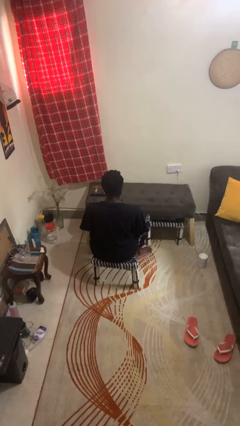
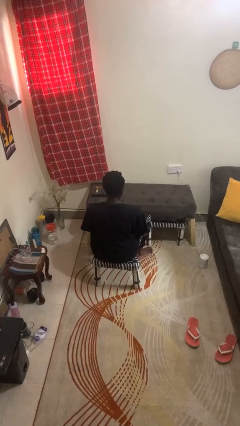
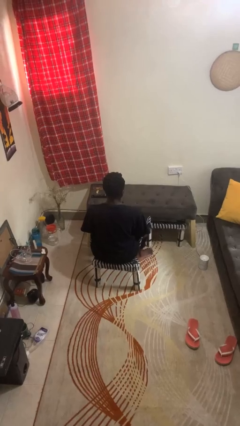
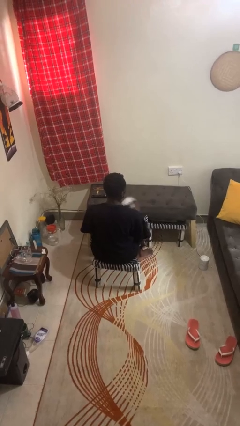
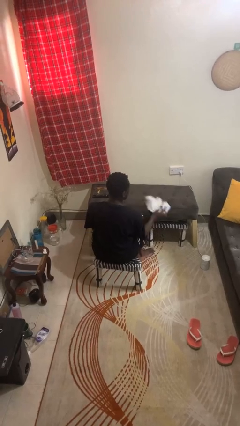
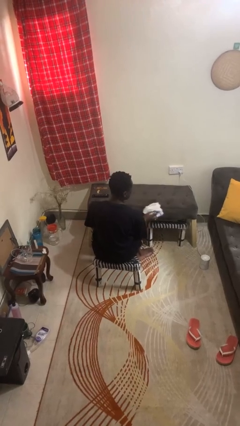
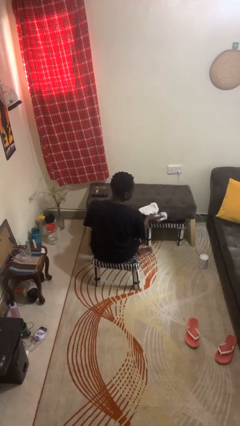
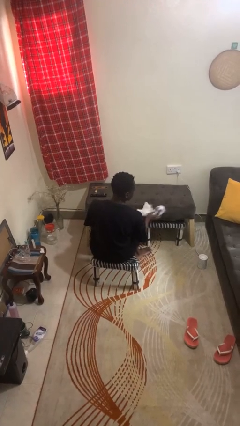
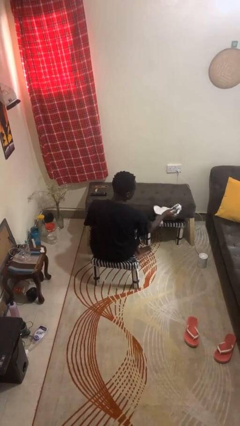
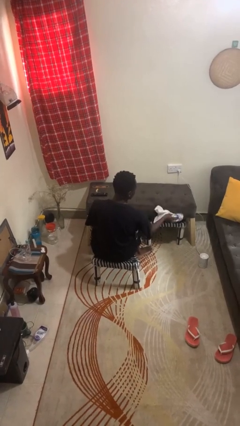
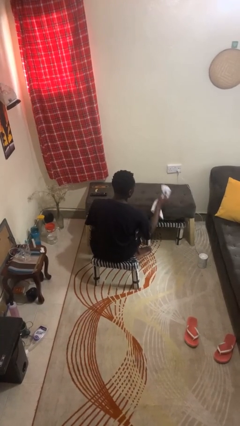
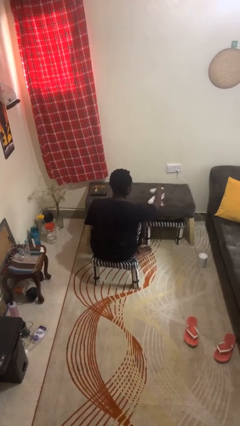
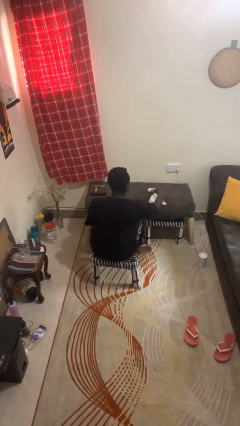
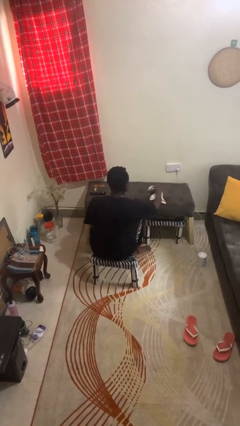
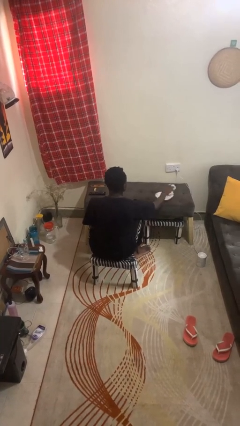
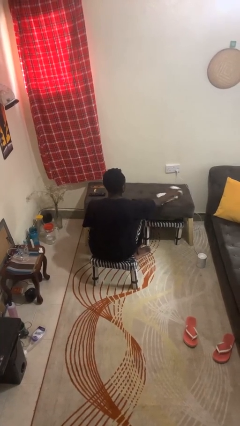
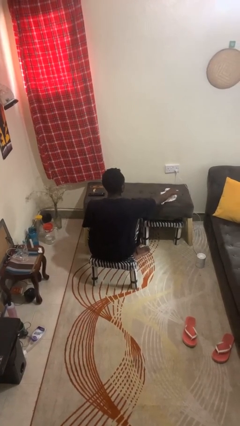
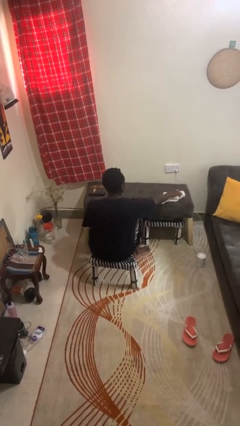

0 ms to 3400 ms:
person cleans table with rag

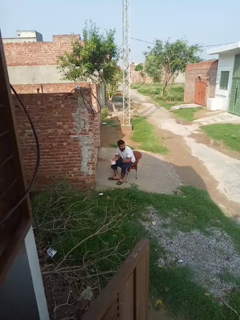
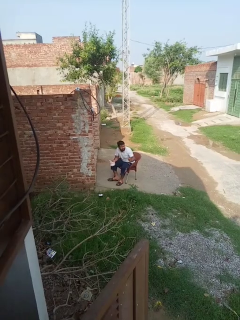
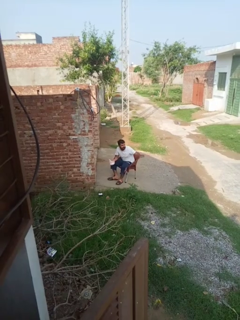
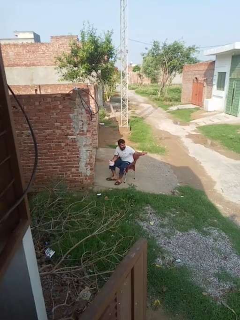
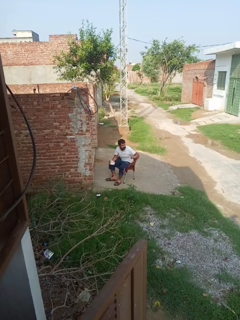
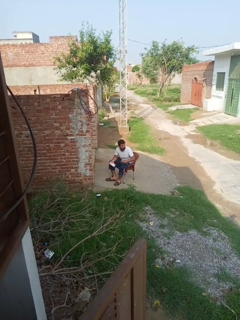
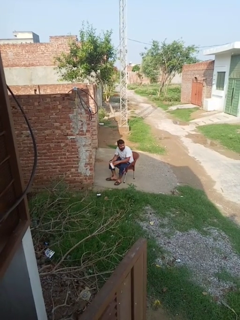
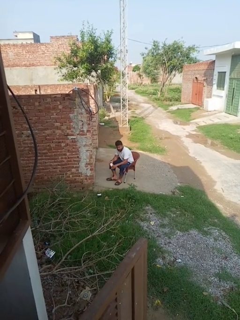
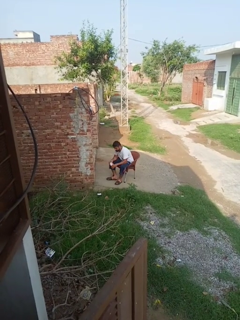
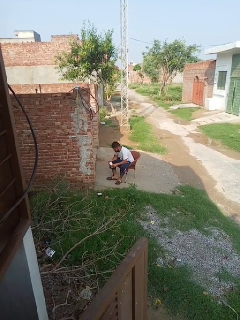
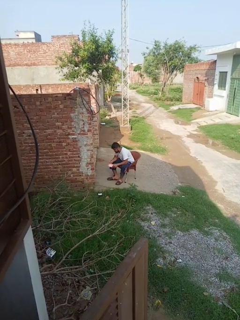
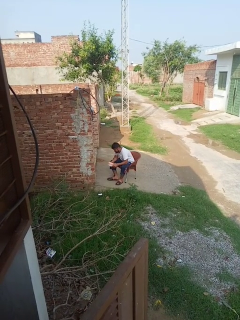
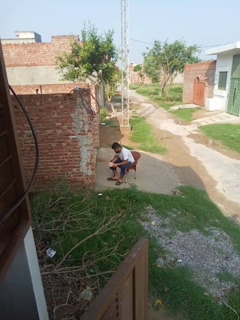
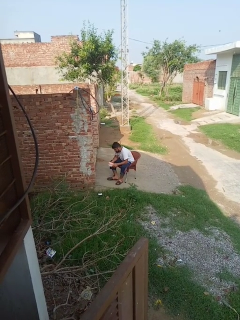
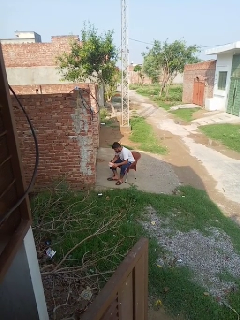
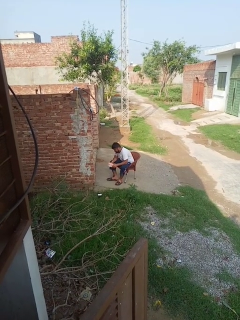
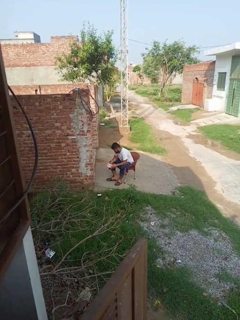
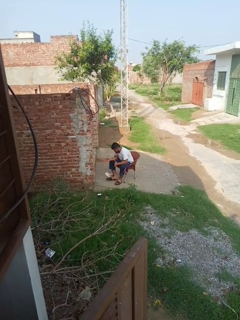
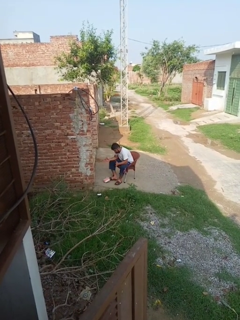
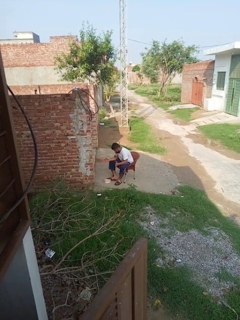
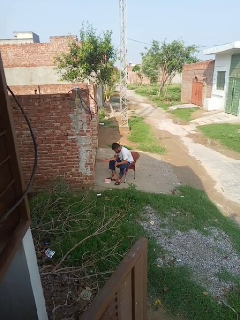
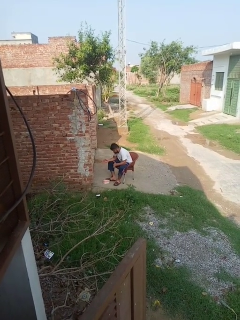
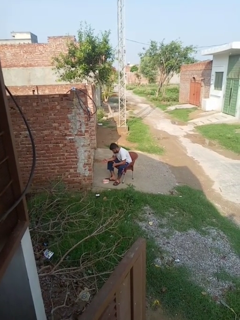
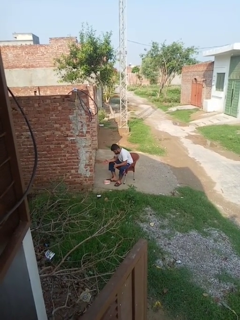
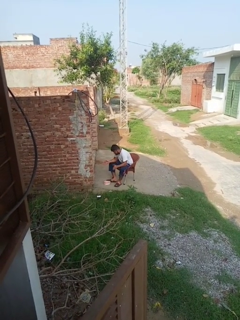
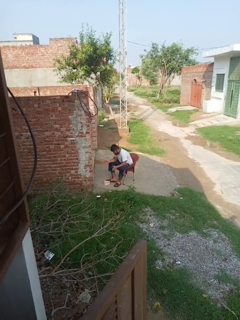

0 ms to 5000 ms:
person drops object

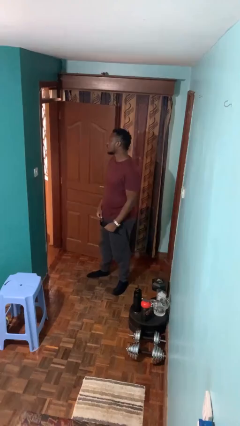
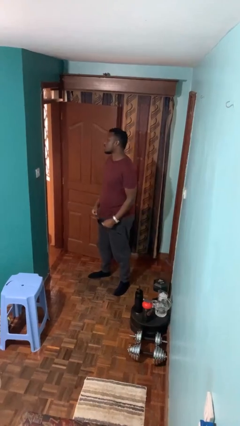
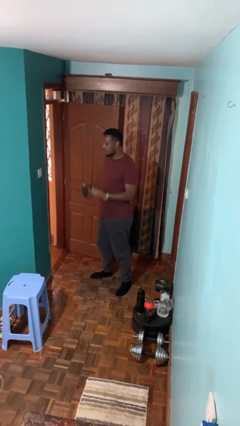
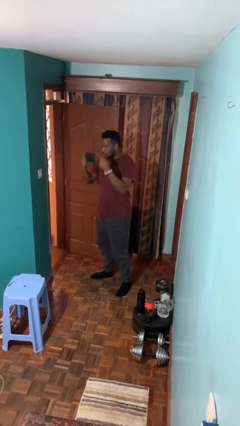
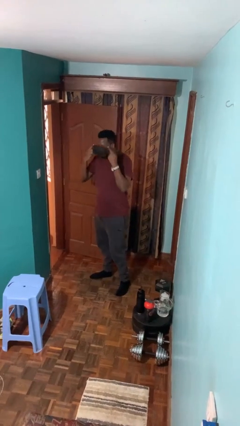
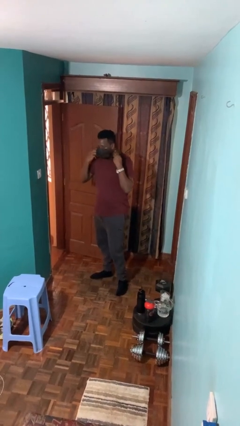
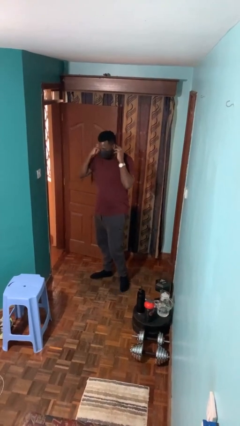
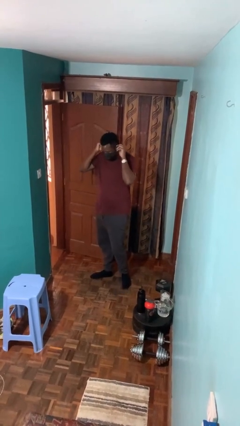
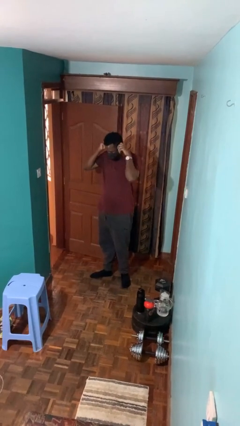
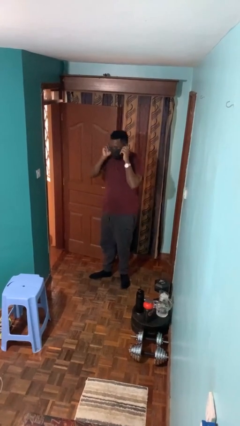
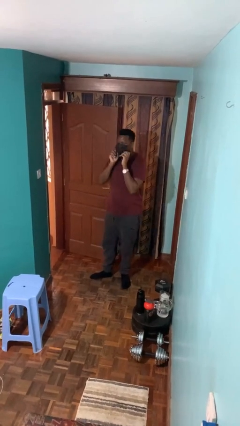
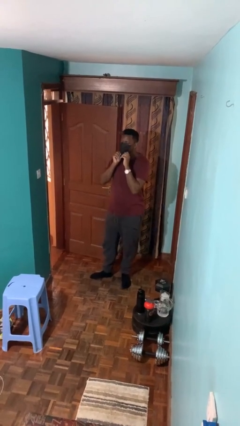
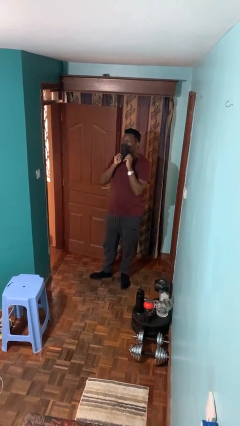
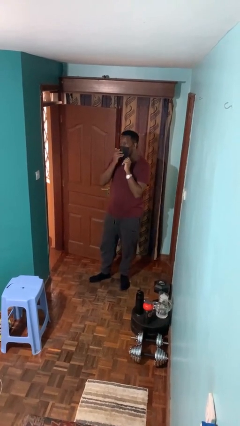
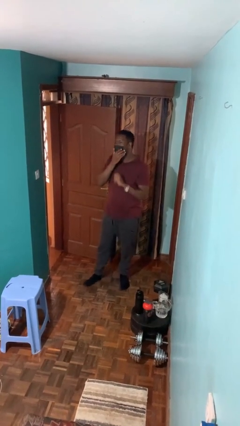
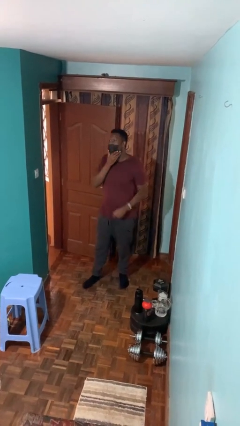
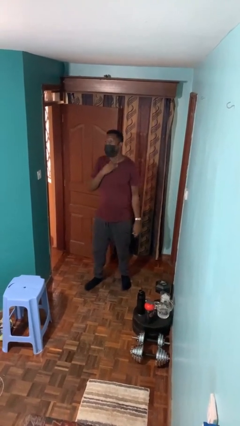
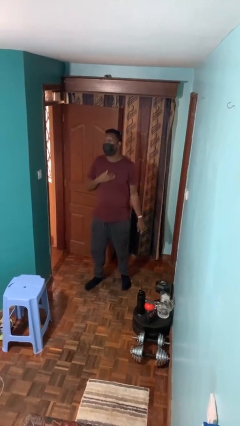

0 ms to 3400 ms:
person puts on facemask

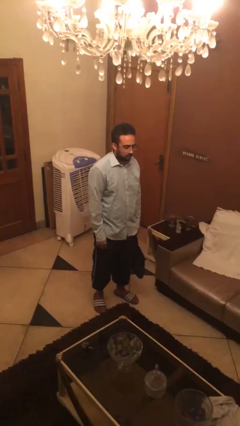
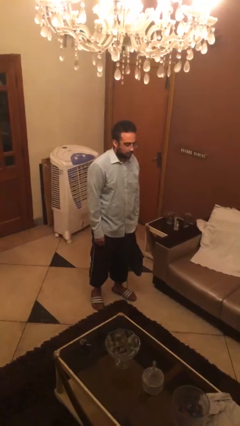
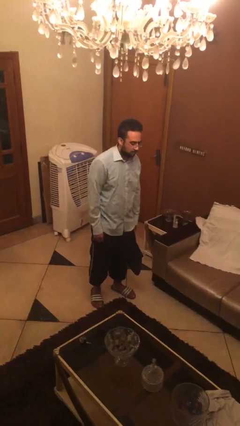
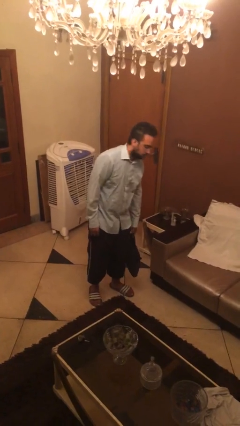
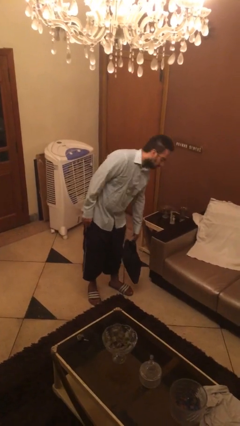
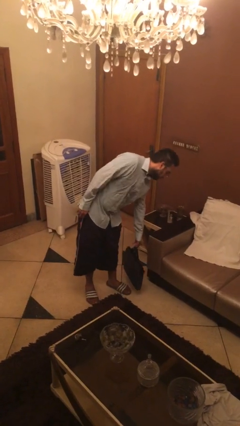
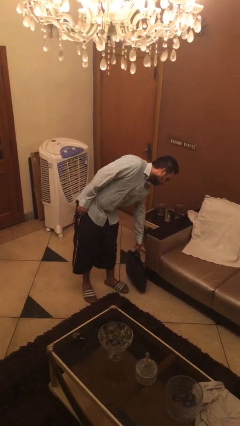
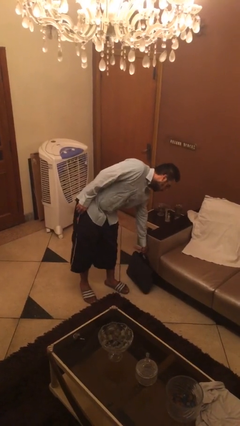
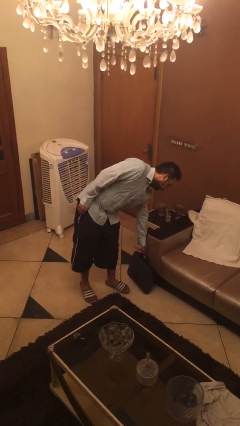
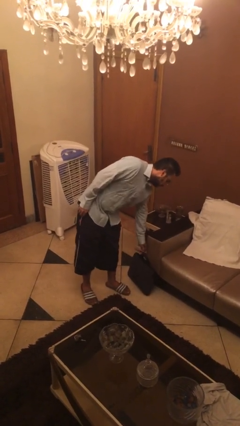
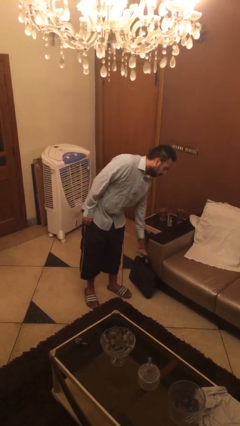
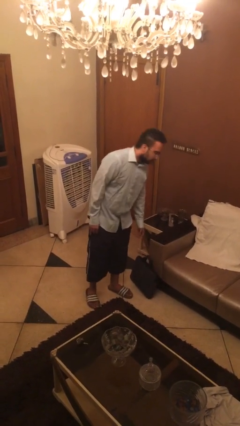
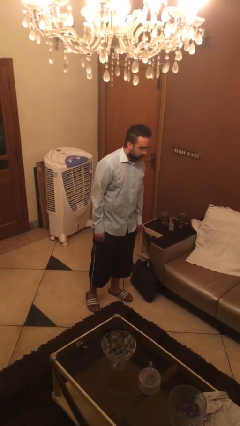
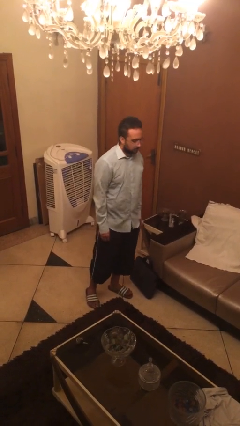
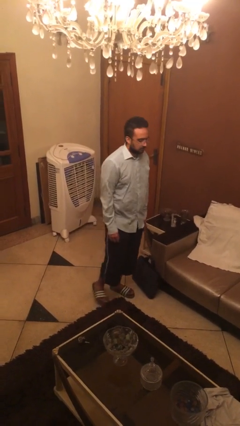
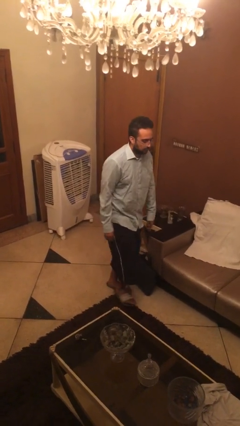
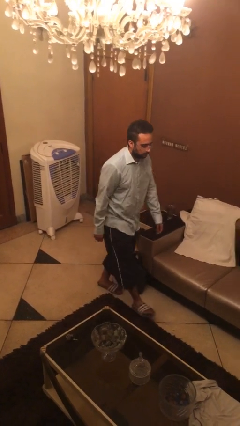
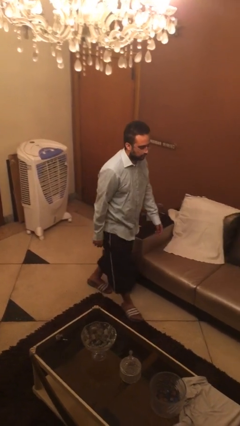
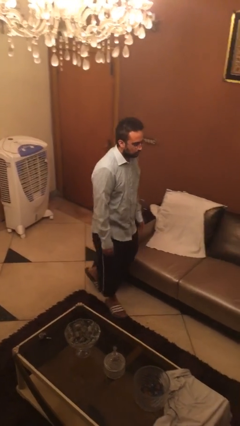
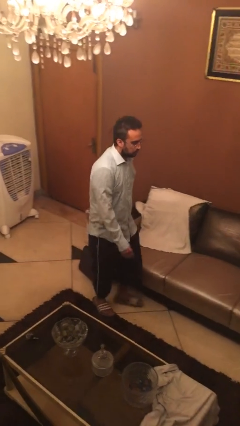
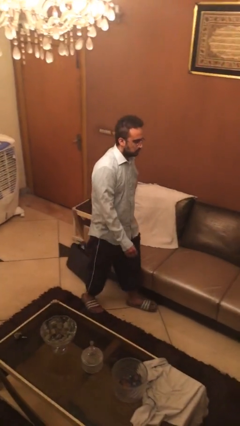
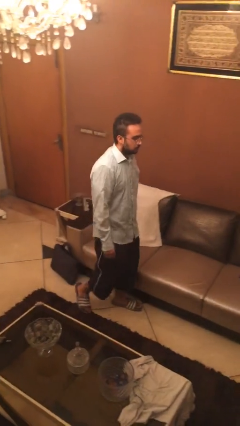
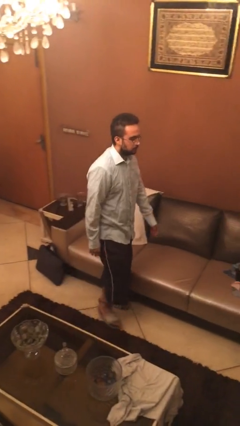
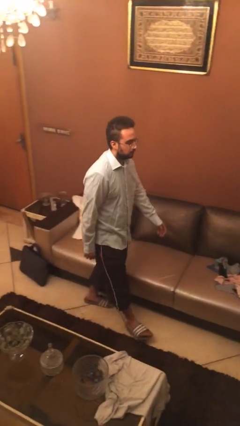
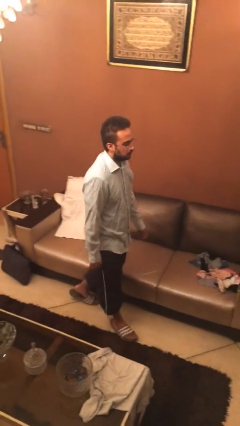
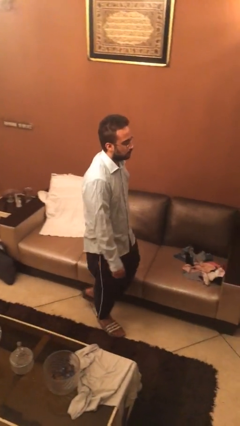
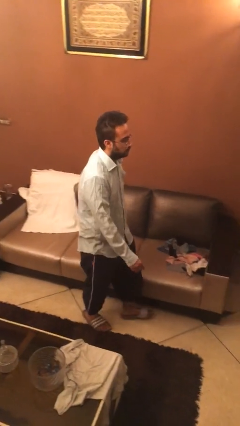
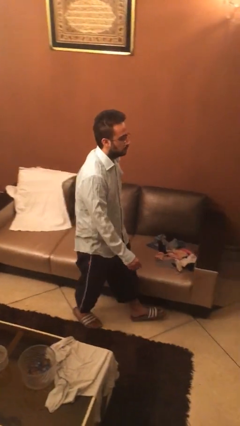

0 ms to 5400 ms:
person puts down object on floor

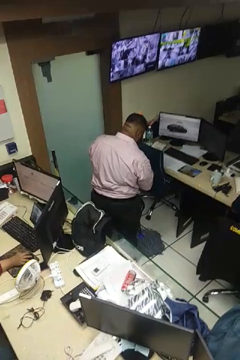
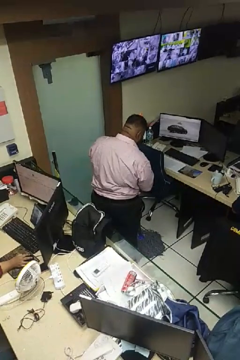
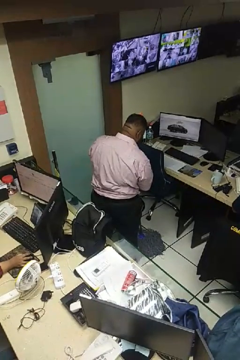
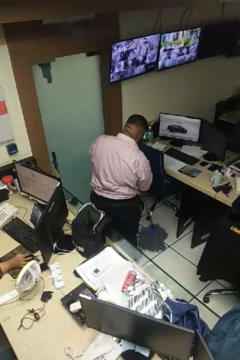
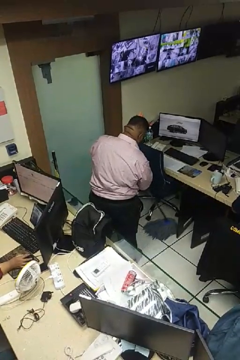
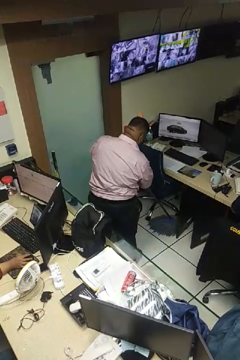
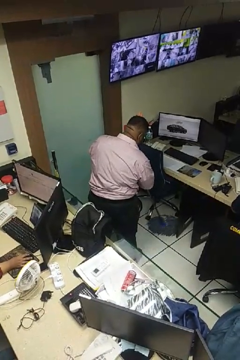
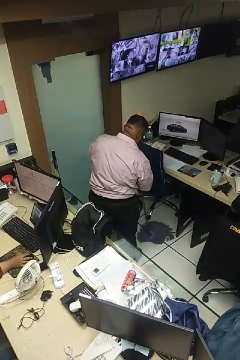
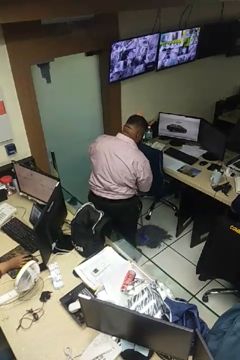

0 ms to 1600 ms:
person mops

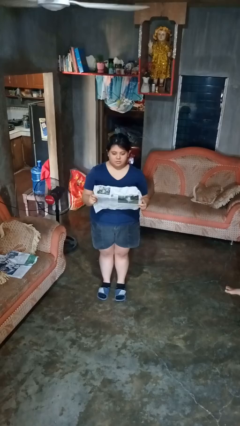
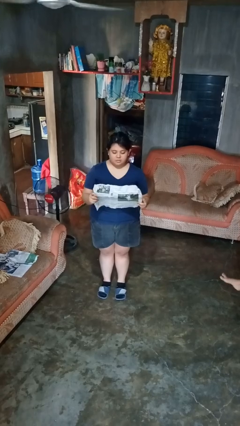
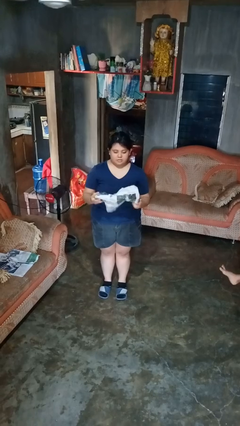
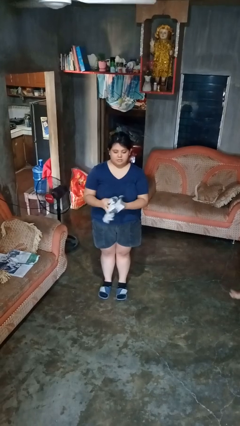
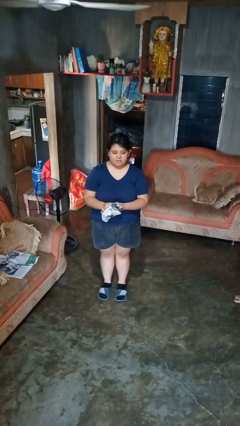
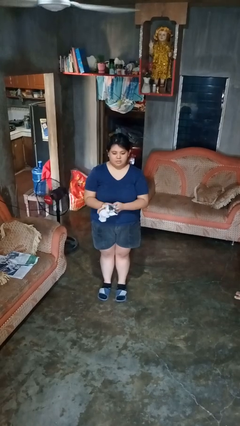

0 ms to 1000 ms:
person crumples paper
